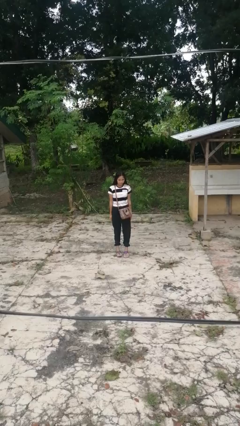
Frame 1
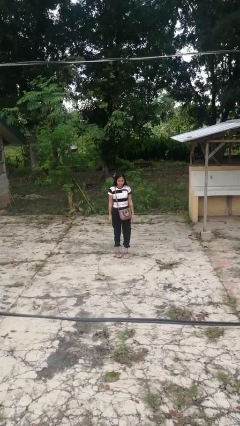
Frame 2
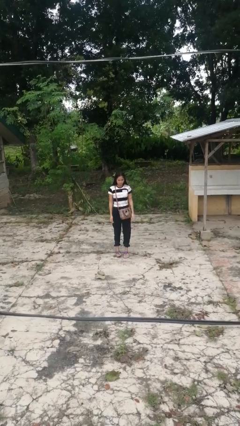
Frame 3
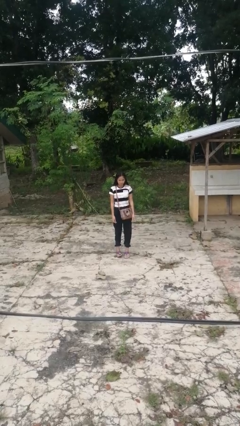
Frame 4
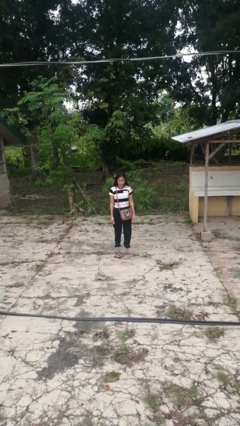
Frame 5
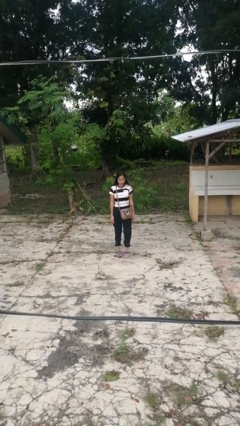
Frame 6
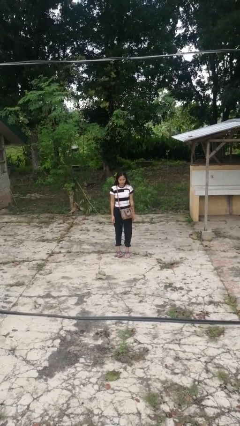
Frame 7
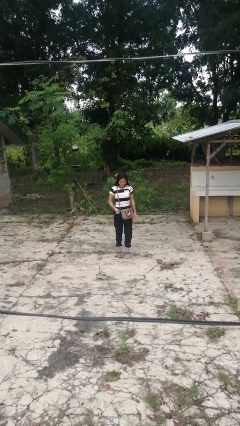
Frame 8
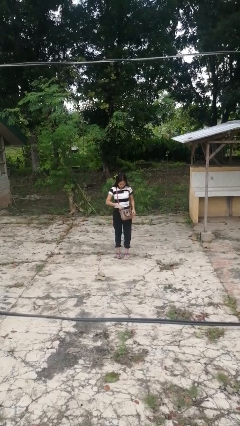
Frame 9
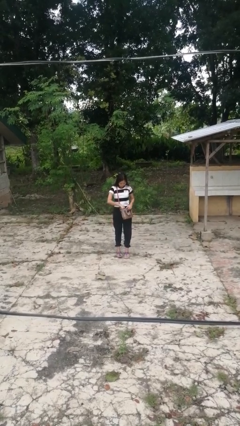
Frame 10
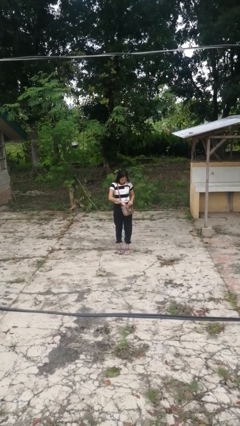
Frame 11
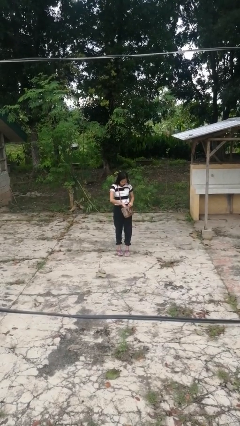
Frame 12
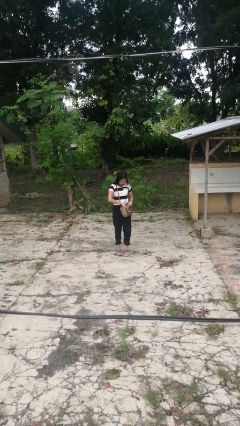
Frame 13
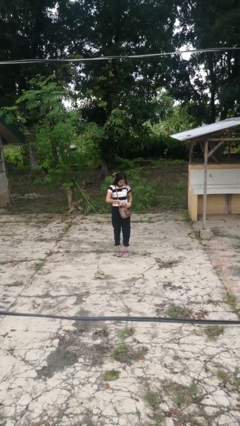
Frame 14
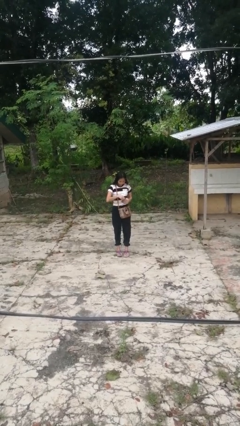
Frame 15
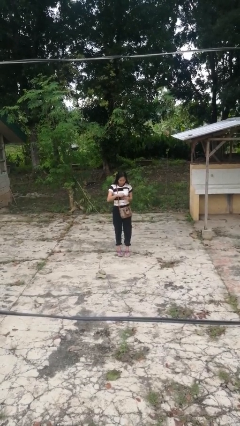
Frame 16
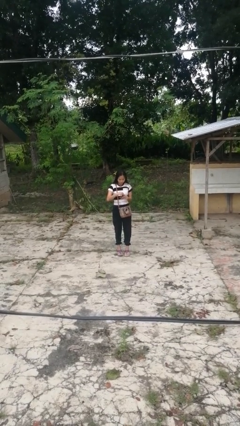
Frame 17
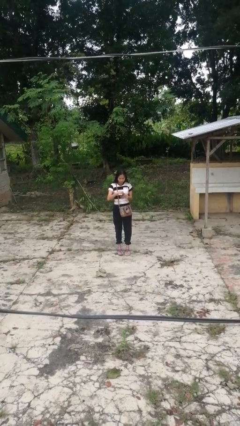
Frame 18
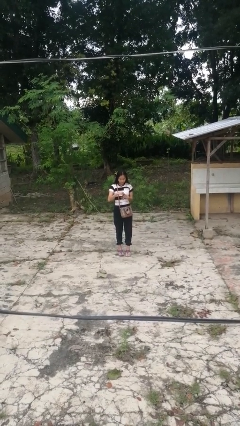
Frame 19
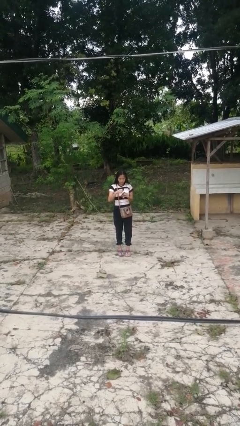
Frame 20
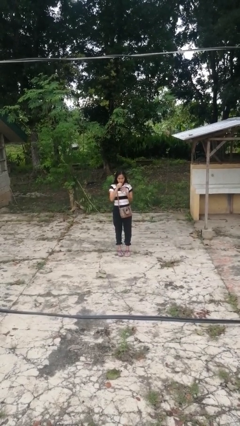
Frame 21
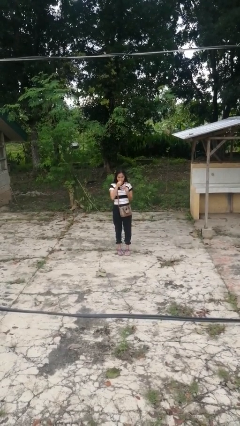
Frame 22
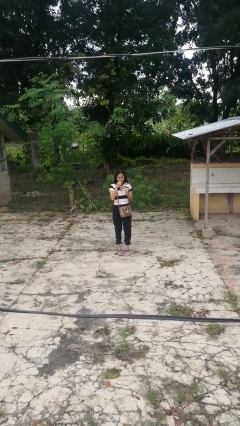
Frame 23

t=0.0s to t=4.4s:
person eats snack from bag

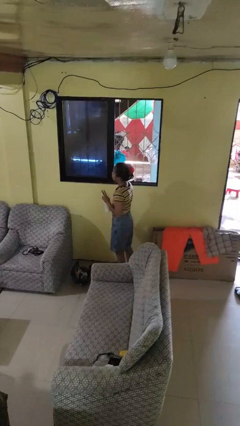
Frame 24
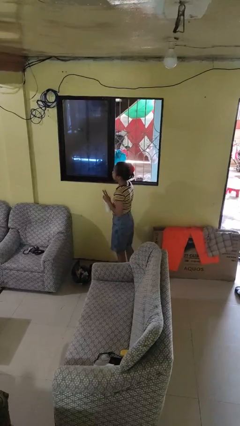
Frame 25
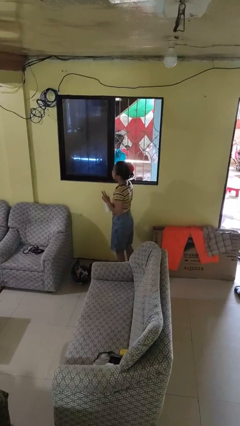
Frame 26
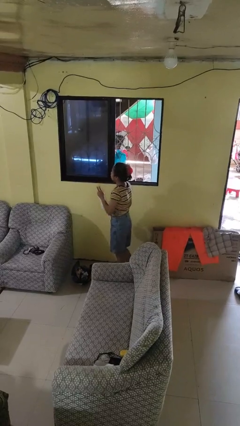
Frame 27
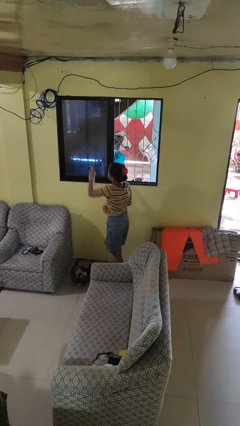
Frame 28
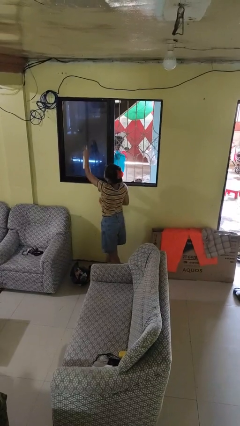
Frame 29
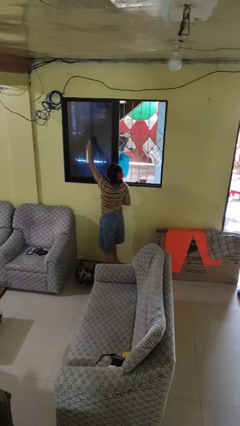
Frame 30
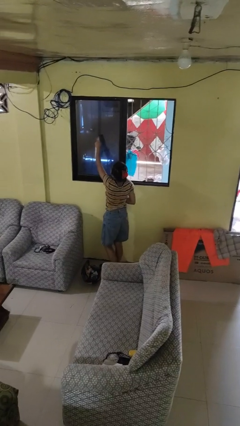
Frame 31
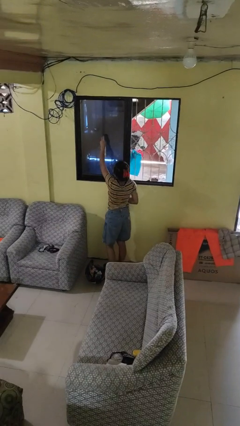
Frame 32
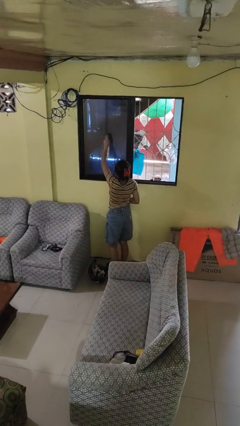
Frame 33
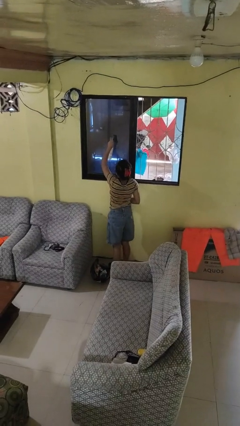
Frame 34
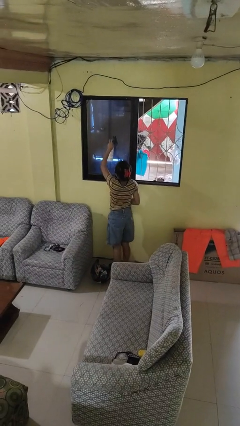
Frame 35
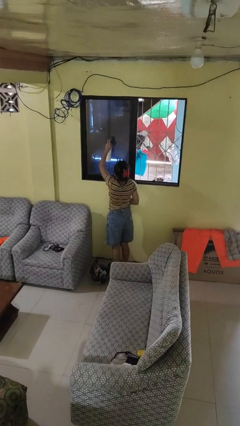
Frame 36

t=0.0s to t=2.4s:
person sprays from bottle

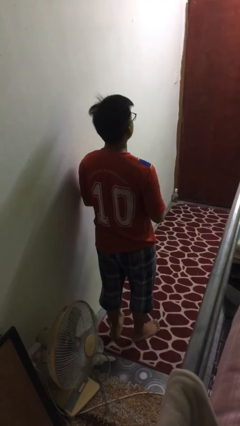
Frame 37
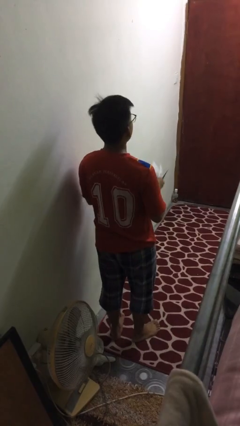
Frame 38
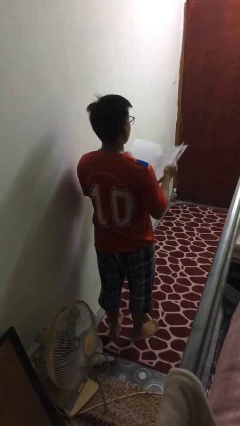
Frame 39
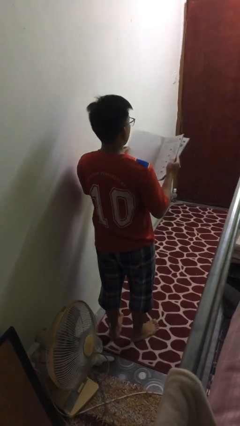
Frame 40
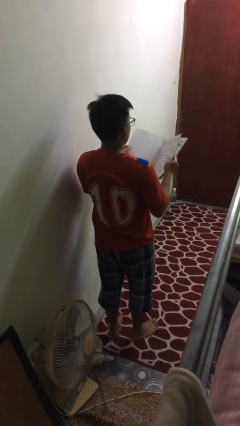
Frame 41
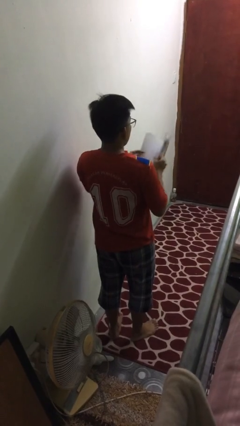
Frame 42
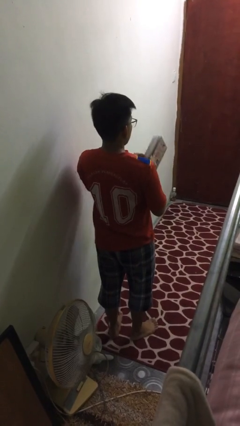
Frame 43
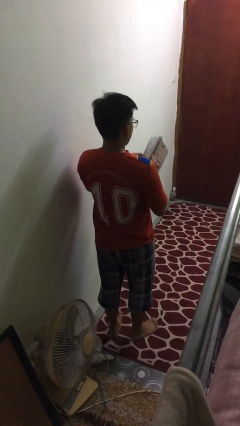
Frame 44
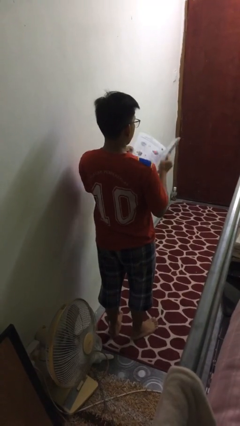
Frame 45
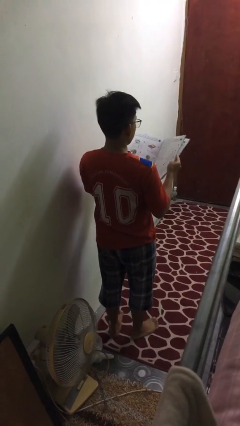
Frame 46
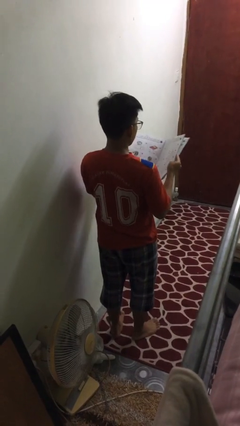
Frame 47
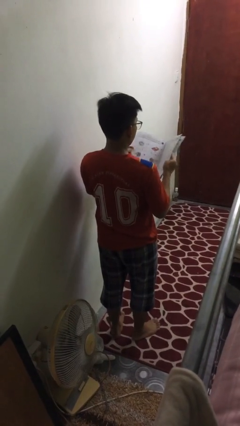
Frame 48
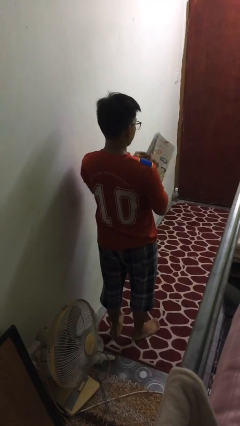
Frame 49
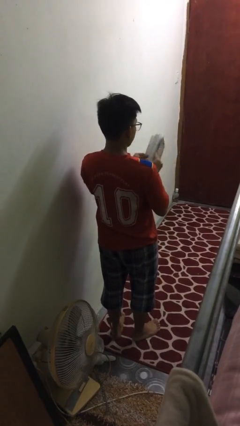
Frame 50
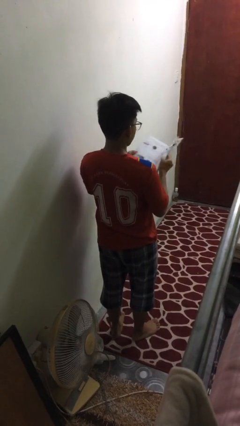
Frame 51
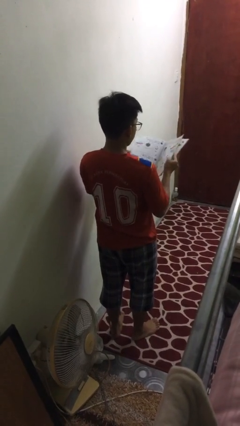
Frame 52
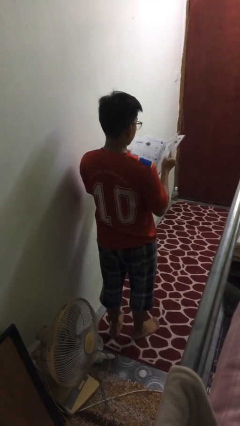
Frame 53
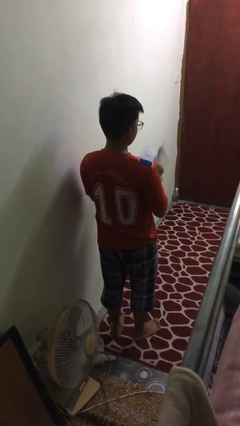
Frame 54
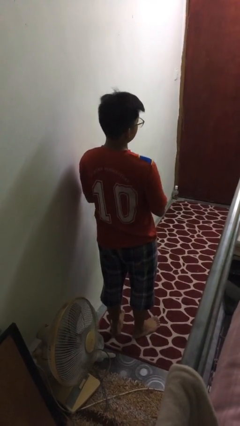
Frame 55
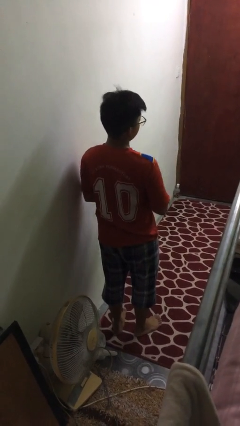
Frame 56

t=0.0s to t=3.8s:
person reads magazine

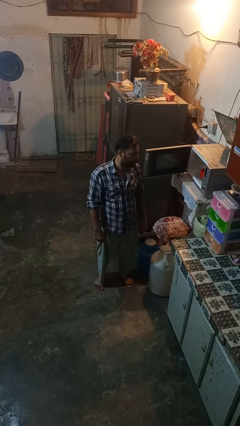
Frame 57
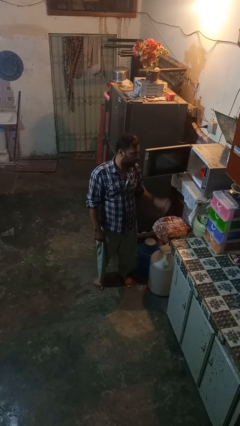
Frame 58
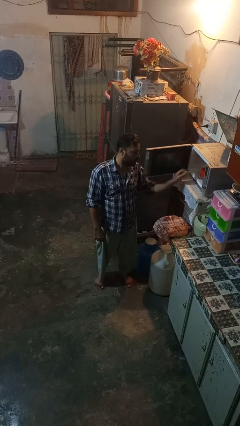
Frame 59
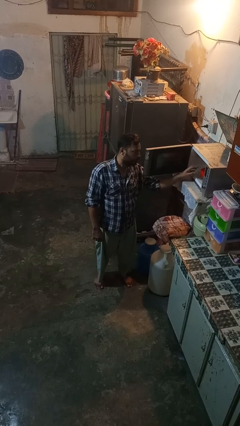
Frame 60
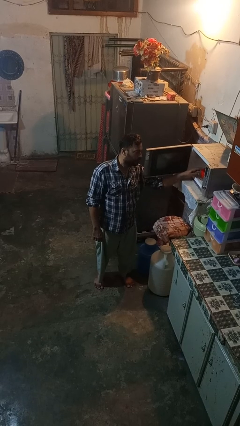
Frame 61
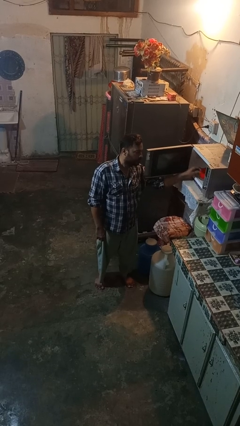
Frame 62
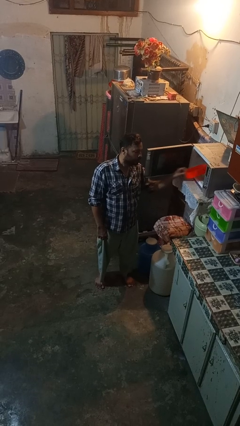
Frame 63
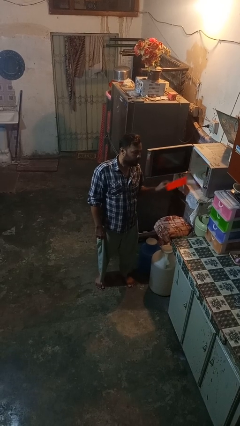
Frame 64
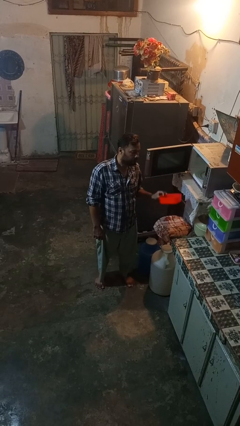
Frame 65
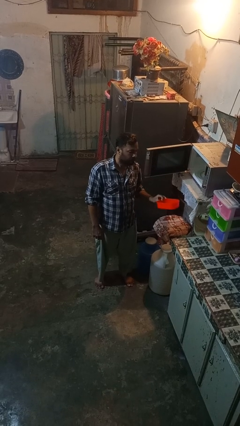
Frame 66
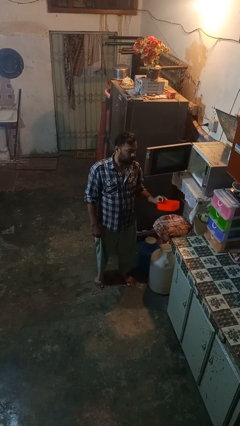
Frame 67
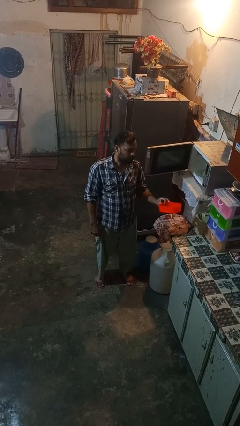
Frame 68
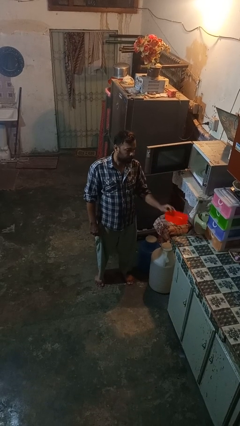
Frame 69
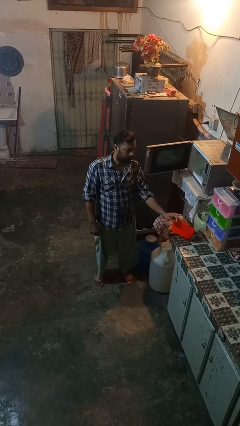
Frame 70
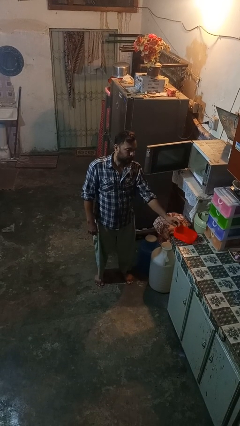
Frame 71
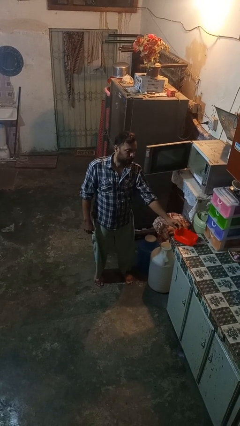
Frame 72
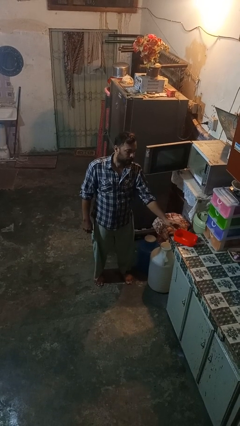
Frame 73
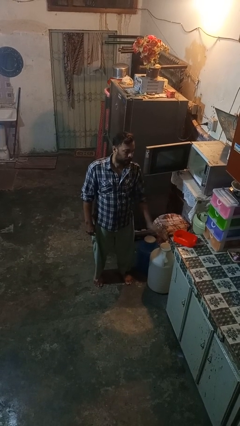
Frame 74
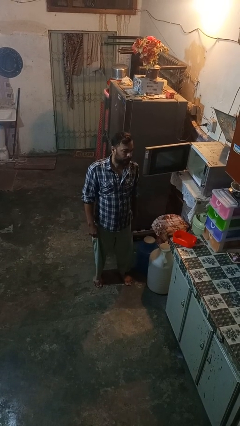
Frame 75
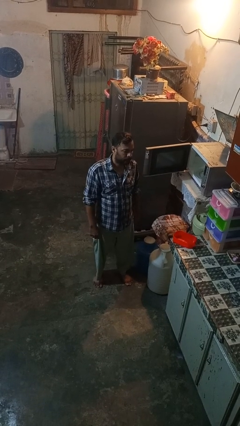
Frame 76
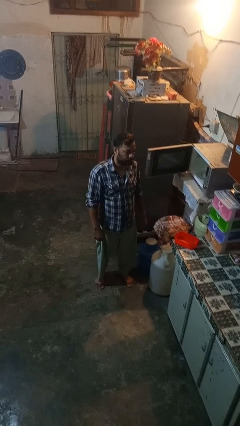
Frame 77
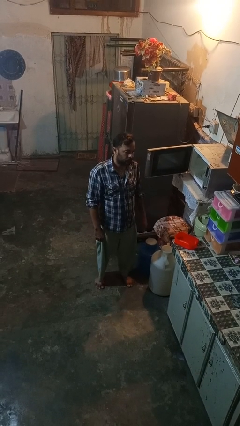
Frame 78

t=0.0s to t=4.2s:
person takes object from microwave

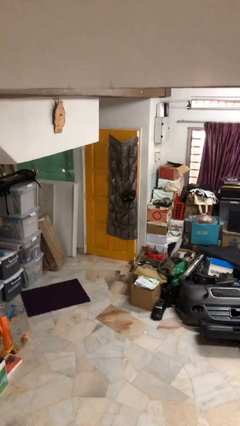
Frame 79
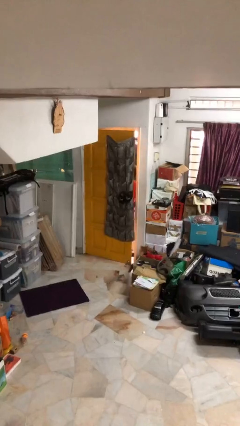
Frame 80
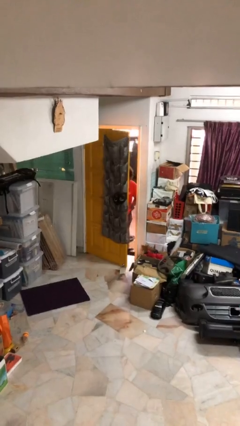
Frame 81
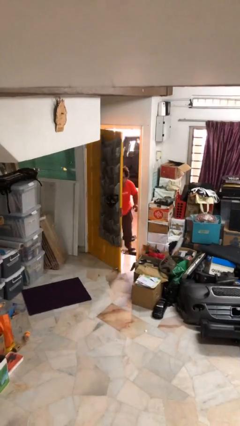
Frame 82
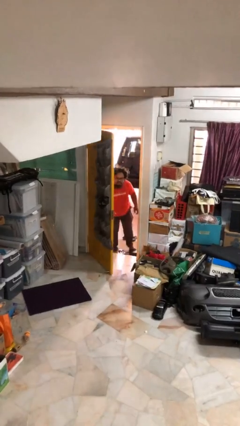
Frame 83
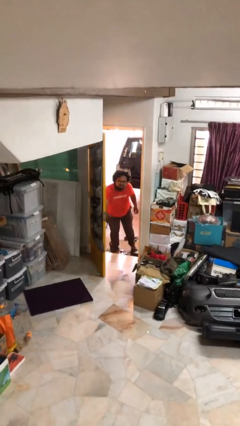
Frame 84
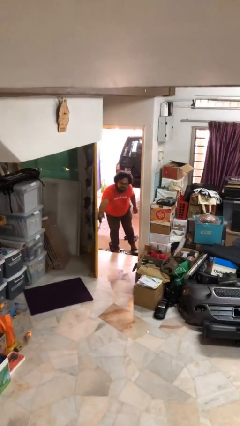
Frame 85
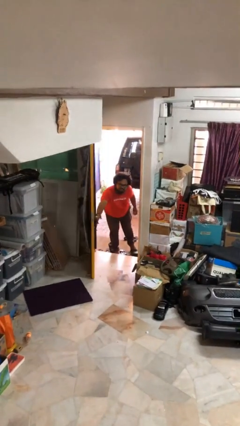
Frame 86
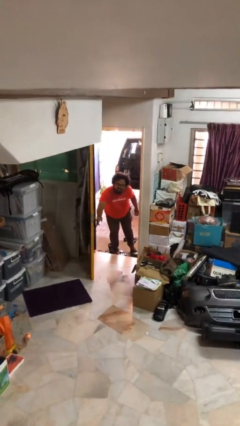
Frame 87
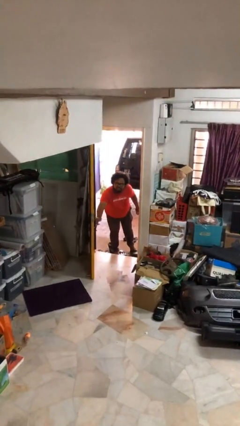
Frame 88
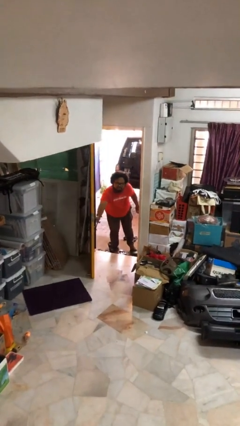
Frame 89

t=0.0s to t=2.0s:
person opens facility door

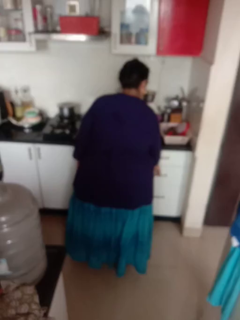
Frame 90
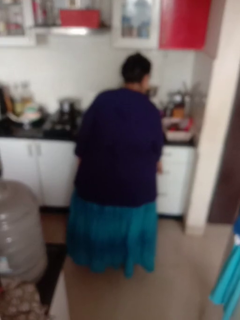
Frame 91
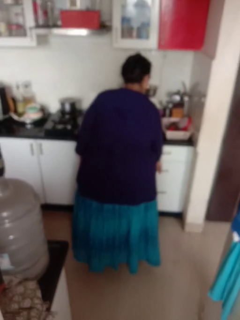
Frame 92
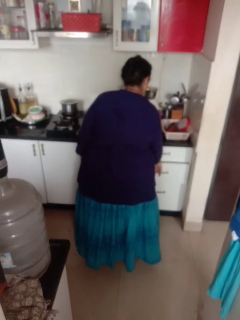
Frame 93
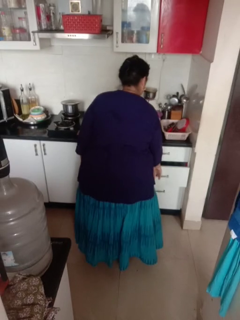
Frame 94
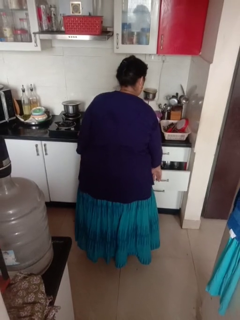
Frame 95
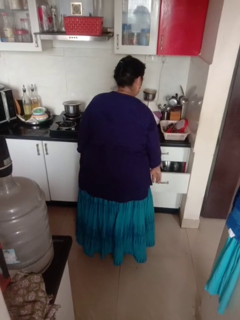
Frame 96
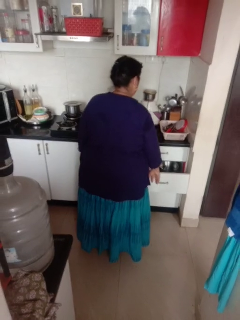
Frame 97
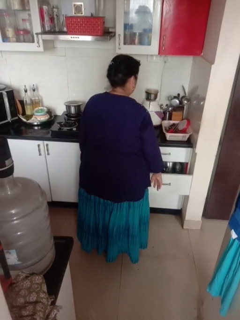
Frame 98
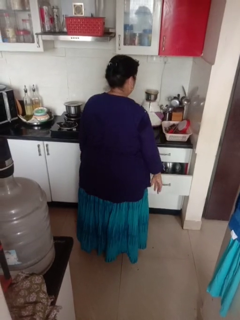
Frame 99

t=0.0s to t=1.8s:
person opens kitchen drawer
